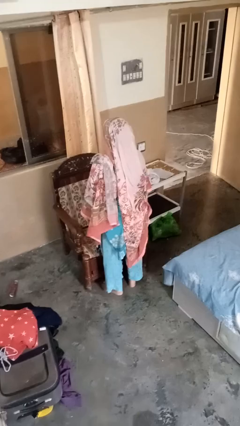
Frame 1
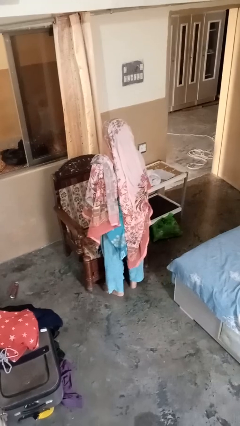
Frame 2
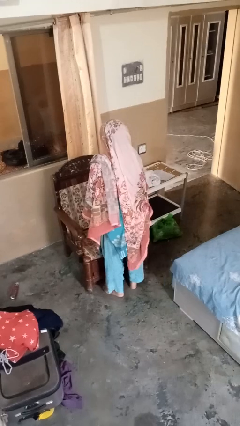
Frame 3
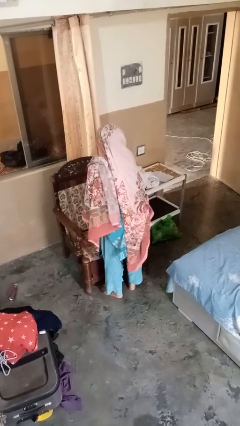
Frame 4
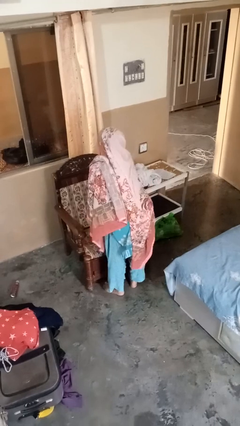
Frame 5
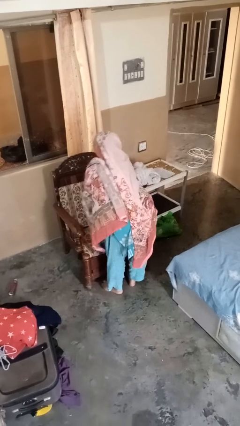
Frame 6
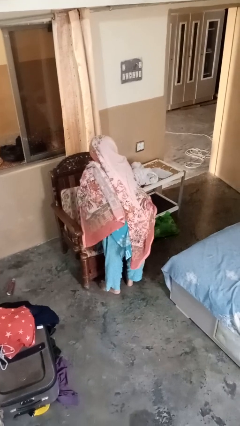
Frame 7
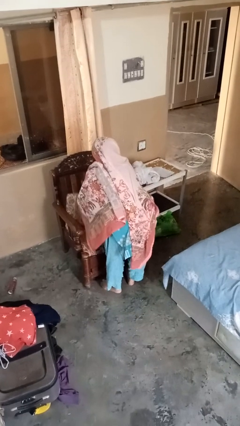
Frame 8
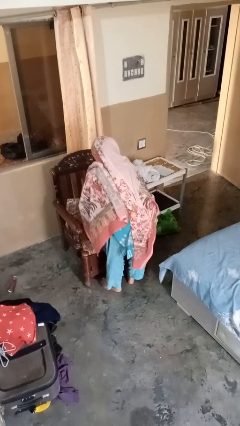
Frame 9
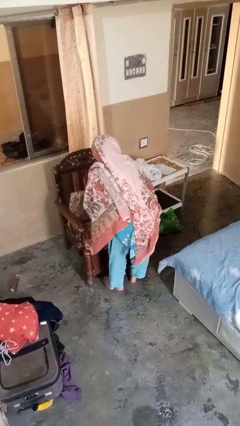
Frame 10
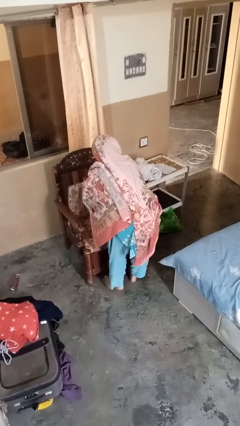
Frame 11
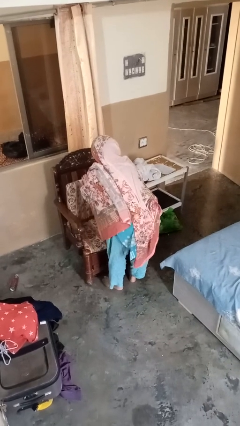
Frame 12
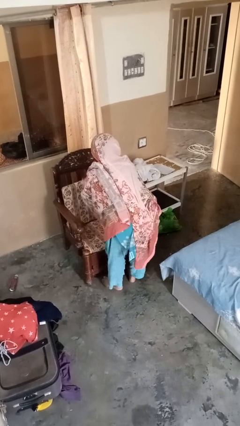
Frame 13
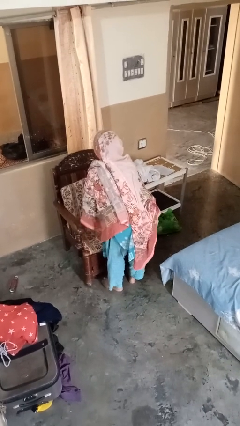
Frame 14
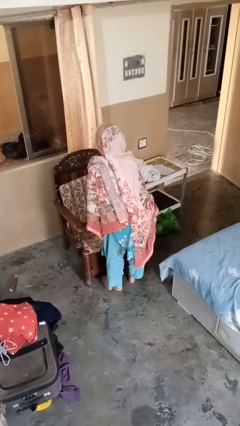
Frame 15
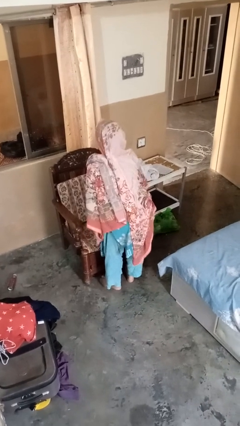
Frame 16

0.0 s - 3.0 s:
person searches in couch

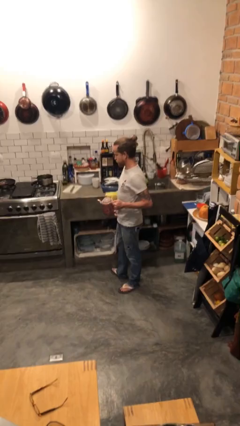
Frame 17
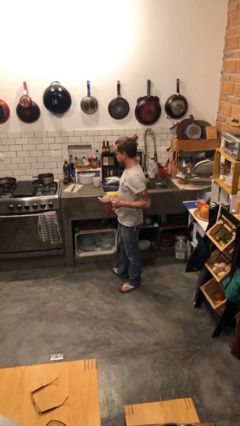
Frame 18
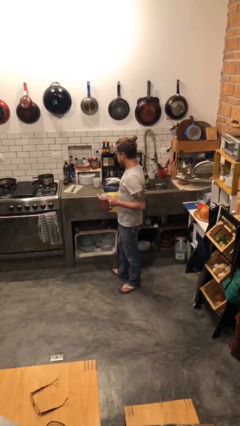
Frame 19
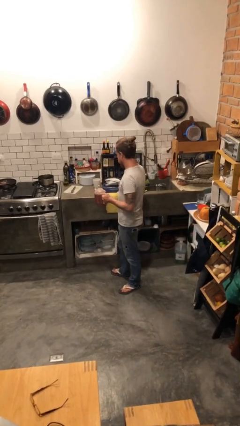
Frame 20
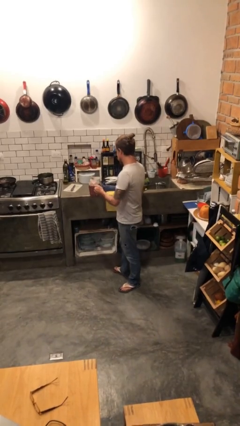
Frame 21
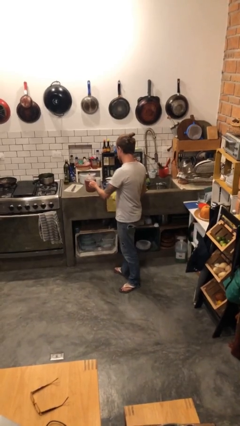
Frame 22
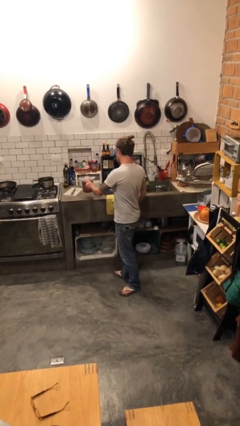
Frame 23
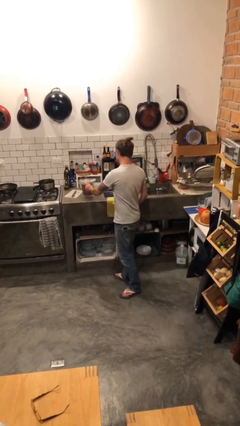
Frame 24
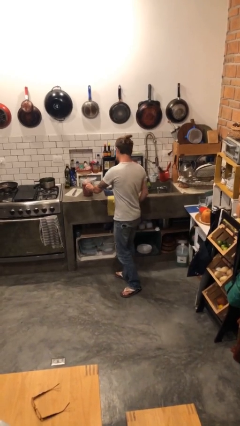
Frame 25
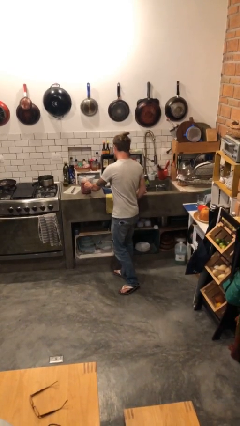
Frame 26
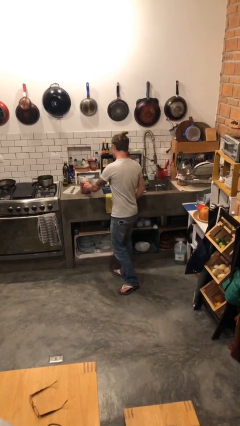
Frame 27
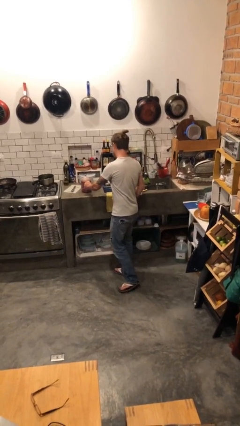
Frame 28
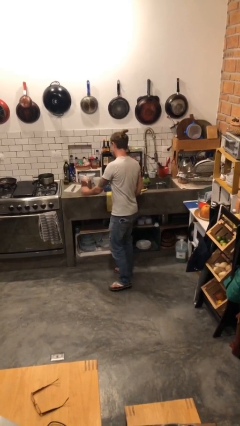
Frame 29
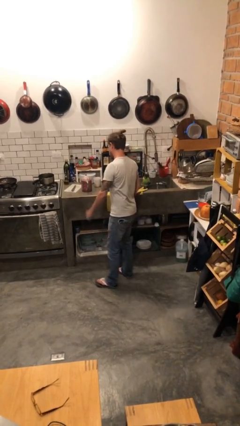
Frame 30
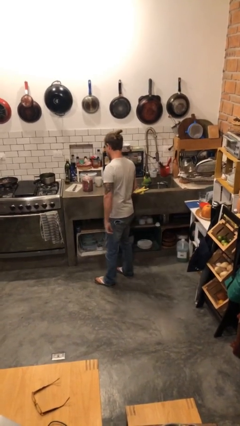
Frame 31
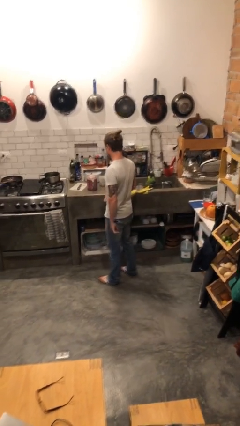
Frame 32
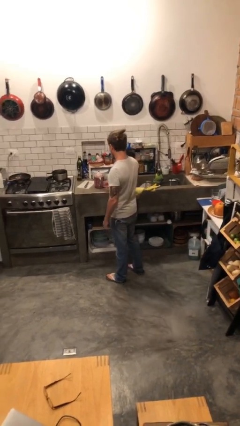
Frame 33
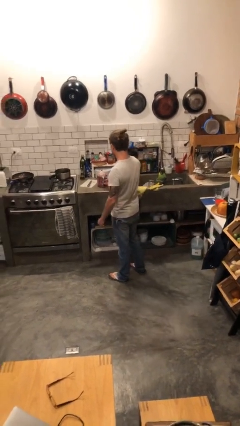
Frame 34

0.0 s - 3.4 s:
person puts down object on countertop

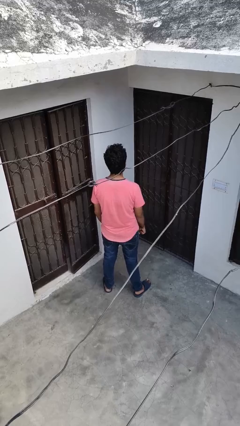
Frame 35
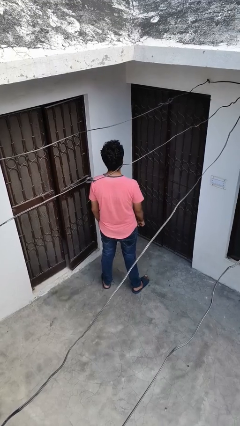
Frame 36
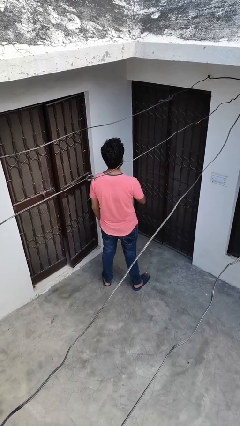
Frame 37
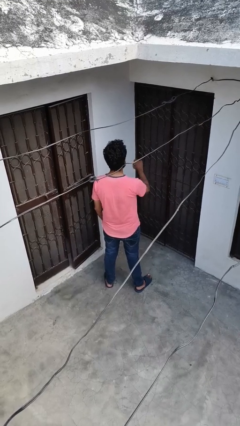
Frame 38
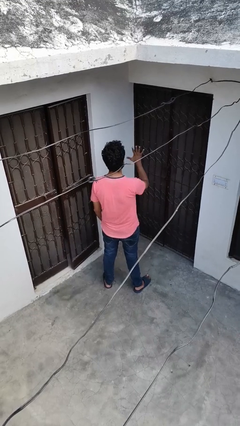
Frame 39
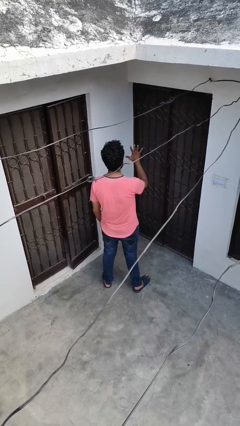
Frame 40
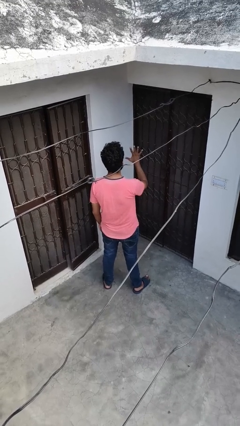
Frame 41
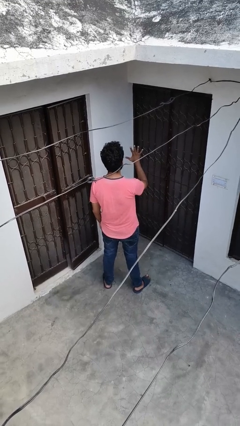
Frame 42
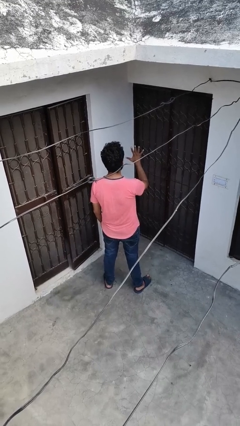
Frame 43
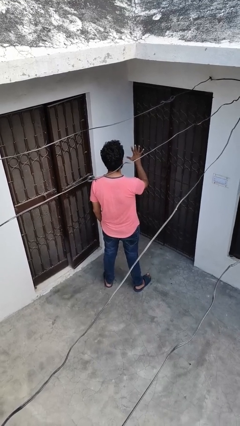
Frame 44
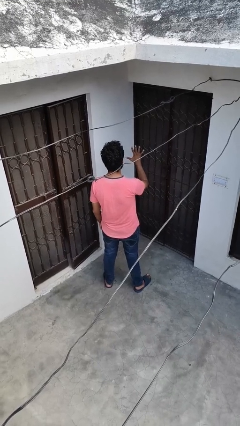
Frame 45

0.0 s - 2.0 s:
person gestures number five

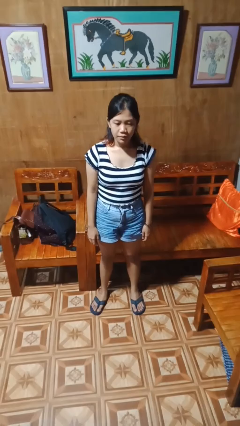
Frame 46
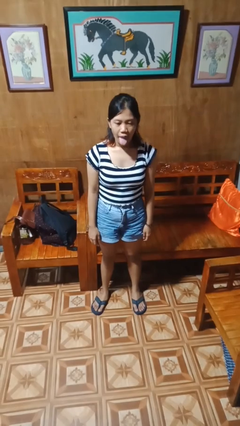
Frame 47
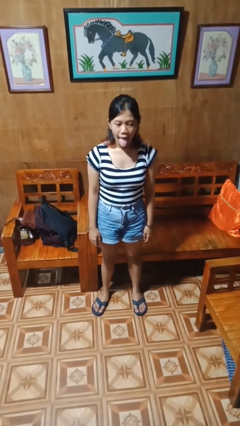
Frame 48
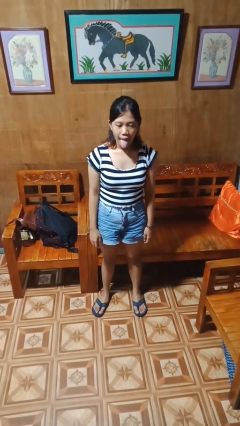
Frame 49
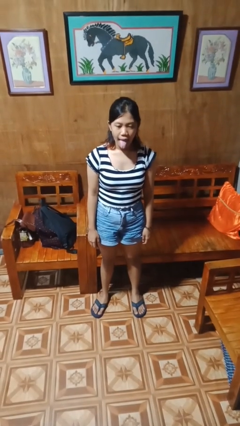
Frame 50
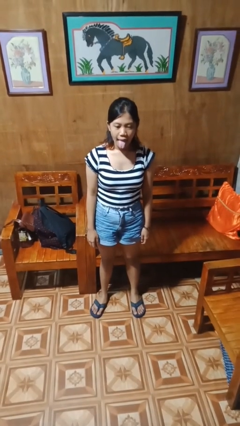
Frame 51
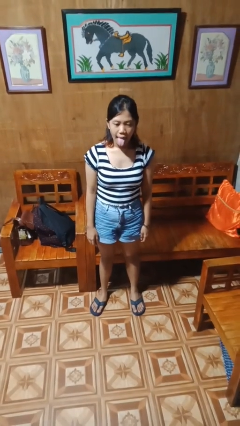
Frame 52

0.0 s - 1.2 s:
person sticks out tongue

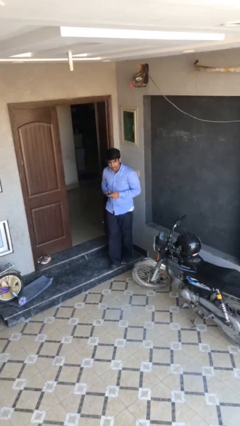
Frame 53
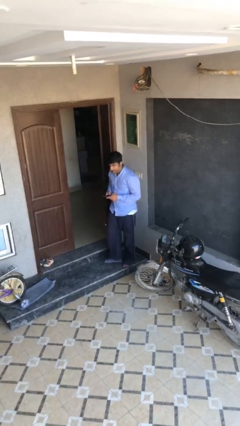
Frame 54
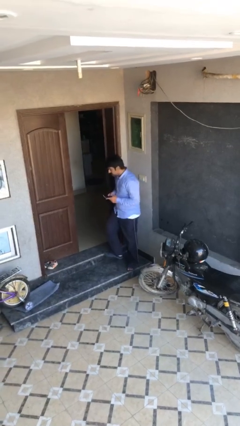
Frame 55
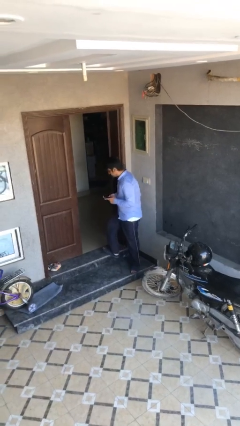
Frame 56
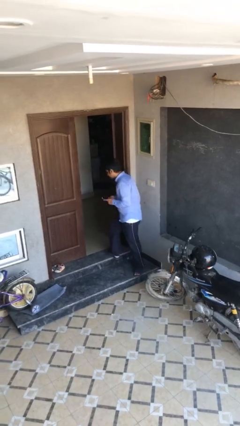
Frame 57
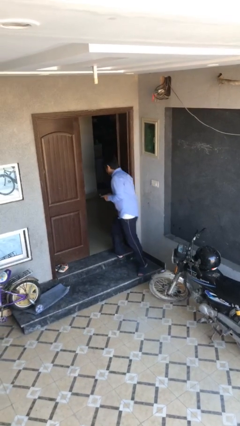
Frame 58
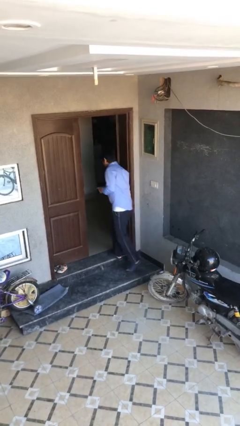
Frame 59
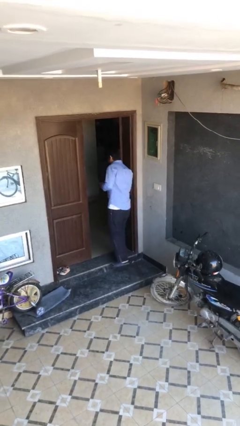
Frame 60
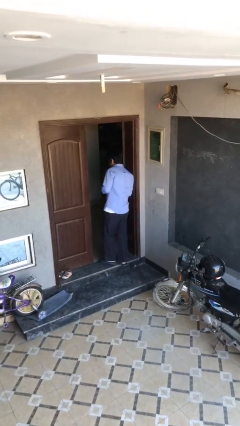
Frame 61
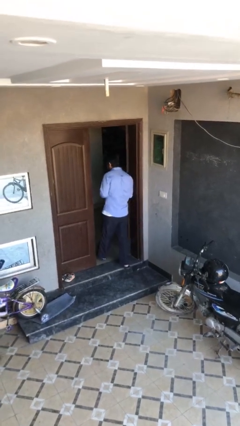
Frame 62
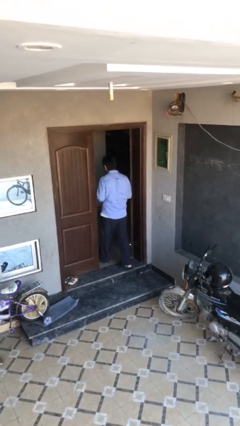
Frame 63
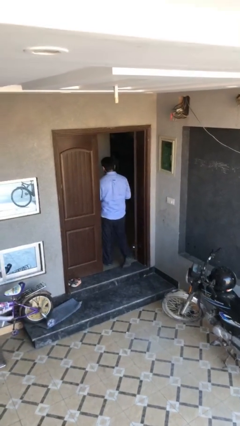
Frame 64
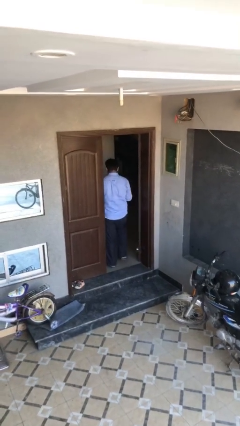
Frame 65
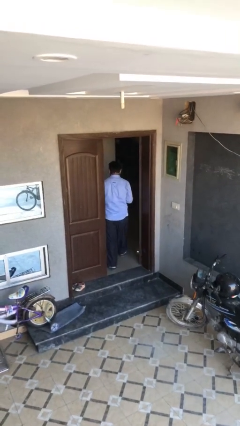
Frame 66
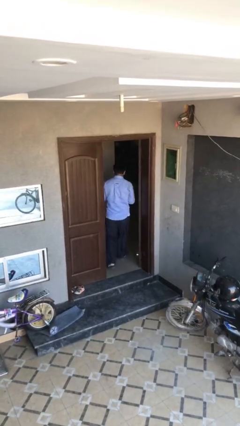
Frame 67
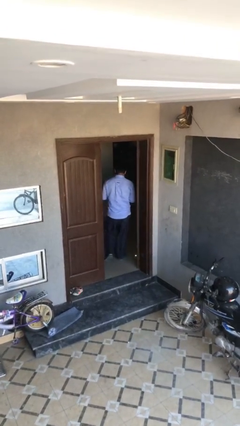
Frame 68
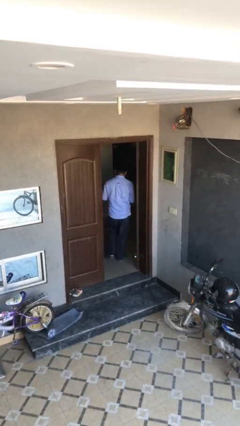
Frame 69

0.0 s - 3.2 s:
person exits scene through structure

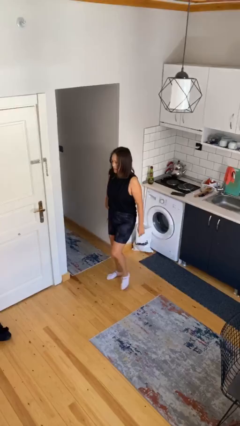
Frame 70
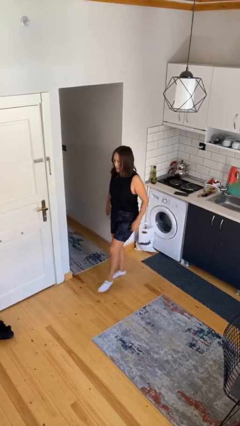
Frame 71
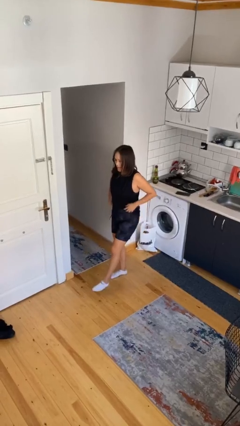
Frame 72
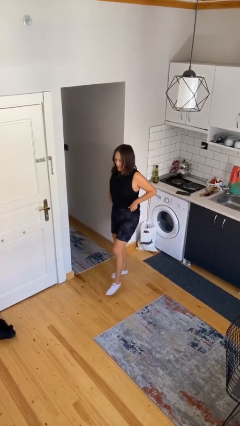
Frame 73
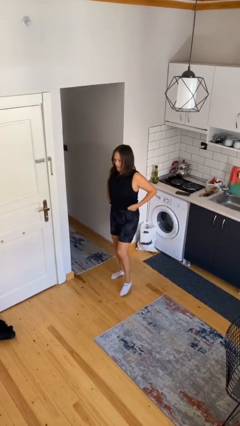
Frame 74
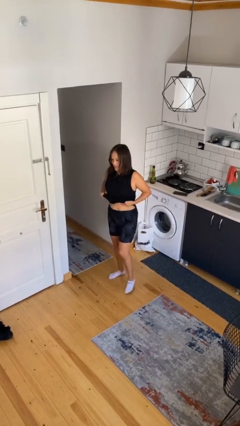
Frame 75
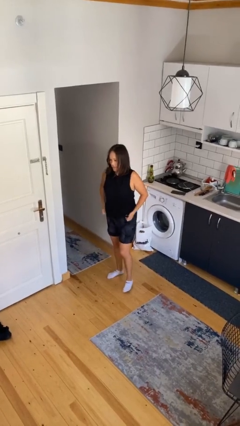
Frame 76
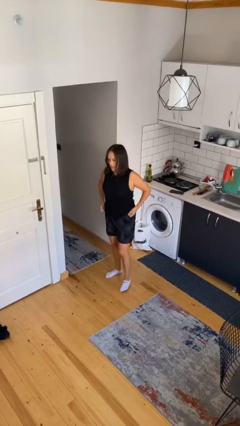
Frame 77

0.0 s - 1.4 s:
person untucks shirt

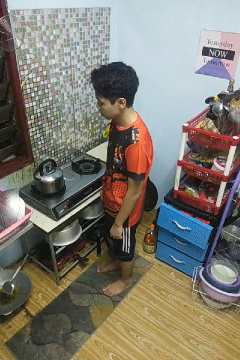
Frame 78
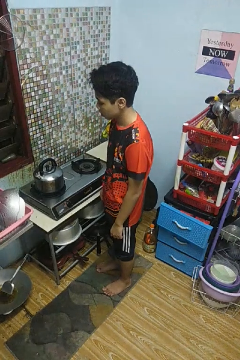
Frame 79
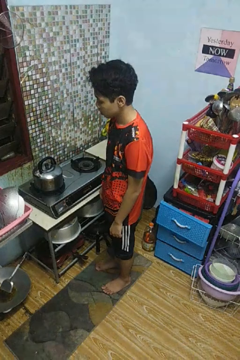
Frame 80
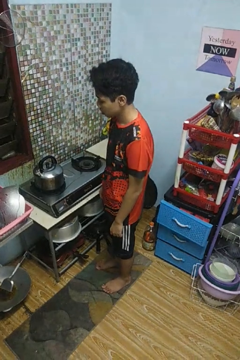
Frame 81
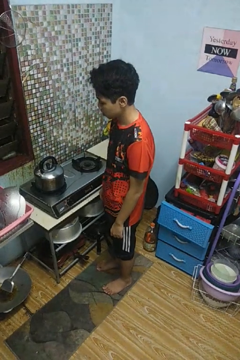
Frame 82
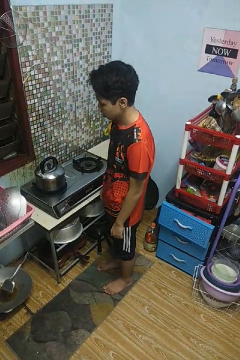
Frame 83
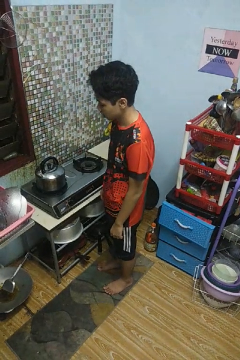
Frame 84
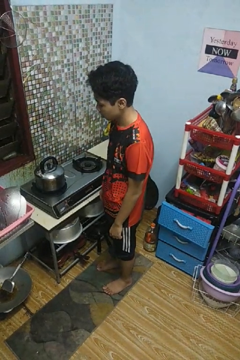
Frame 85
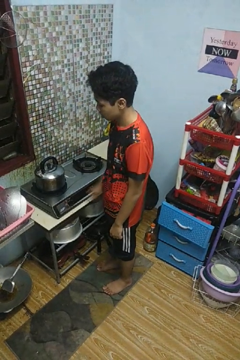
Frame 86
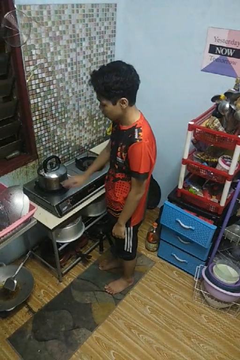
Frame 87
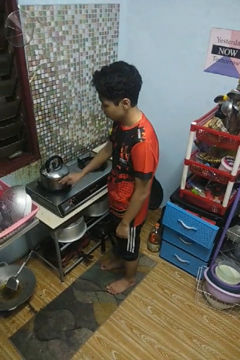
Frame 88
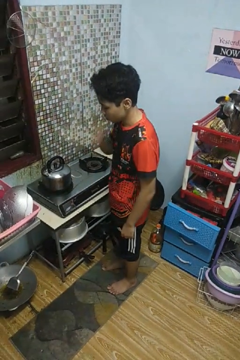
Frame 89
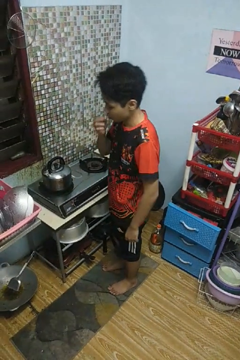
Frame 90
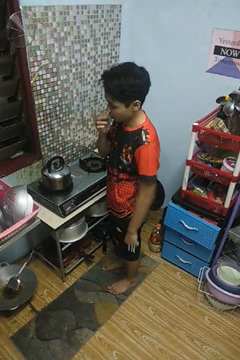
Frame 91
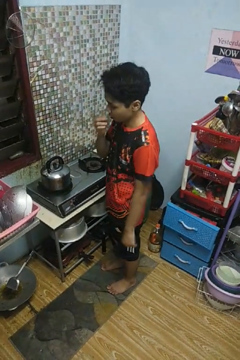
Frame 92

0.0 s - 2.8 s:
person burns hand
